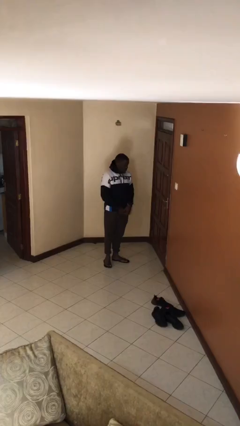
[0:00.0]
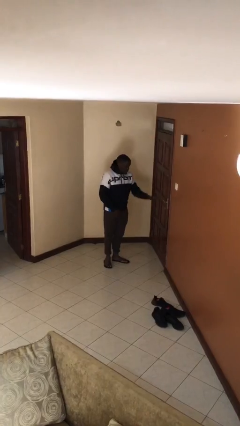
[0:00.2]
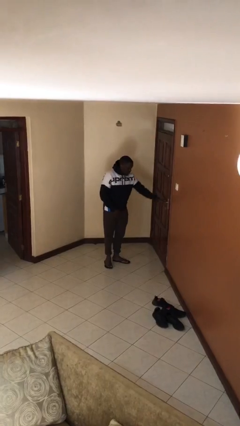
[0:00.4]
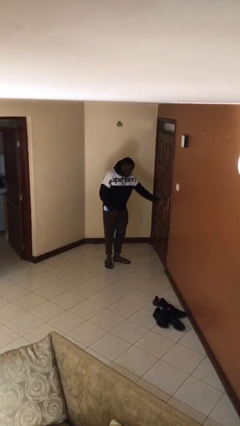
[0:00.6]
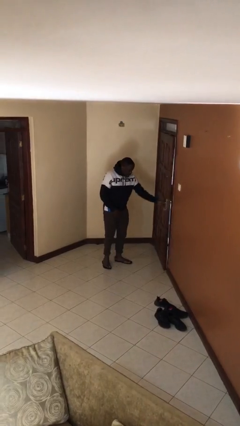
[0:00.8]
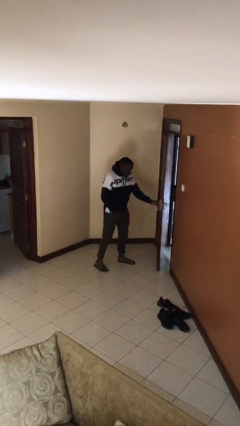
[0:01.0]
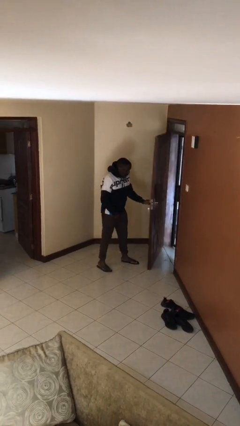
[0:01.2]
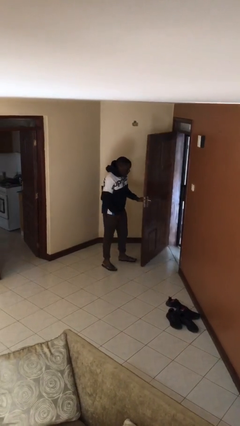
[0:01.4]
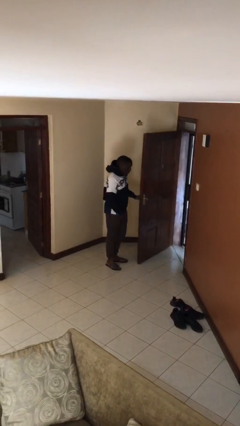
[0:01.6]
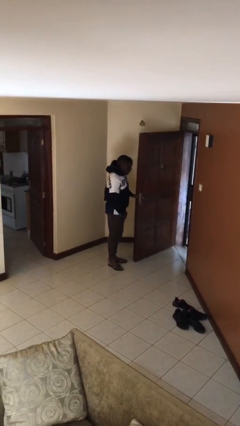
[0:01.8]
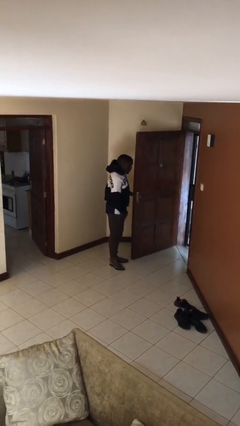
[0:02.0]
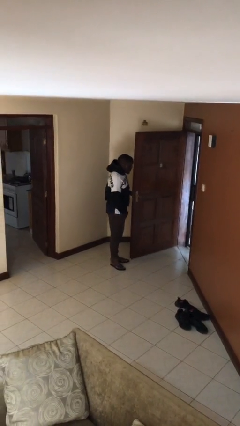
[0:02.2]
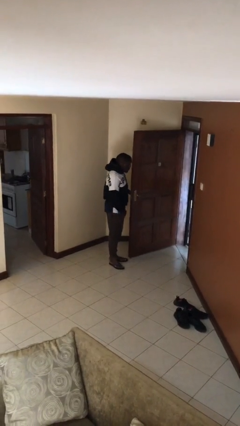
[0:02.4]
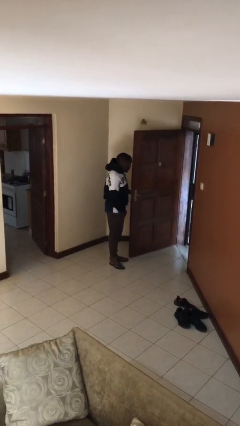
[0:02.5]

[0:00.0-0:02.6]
person opens facility door

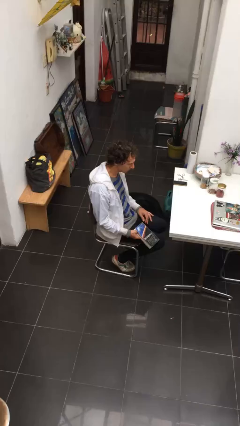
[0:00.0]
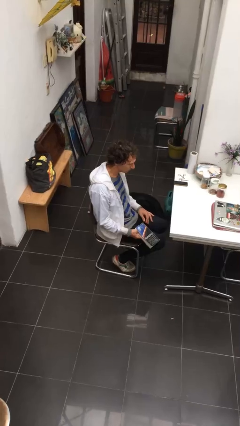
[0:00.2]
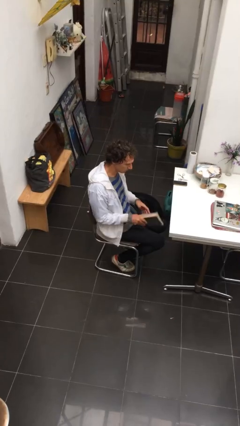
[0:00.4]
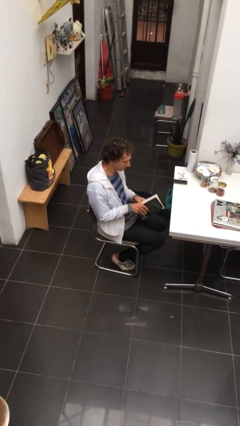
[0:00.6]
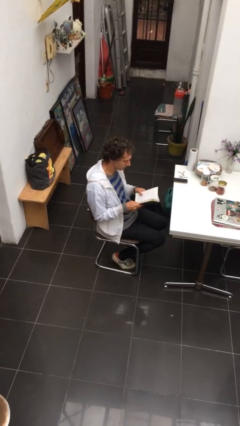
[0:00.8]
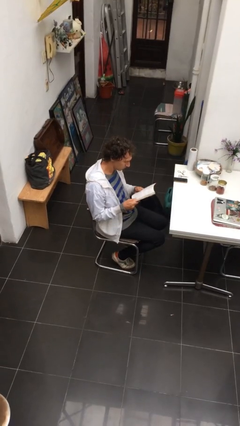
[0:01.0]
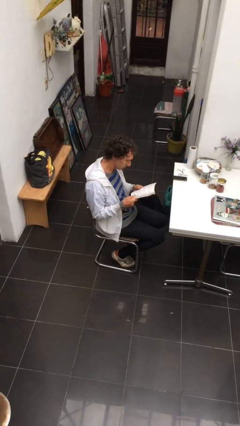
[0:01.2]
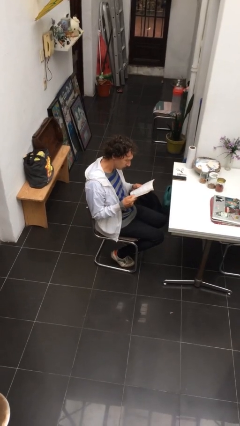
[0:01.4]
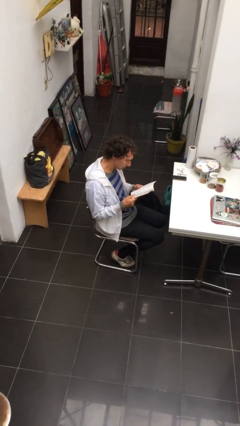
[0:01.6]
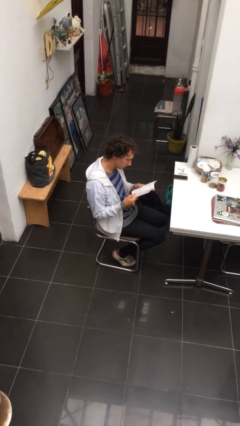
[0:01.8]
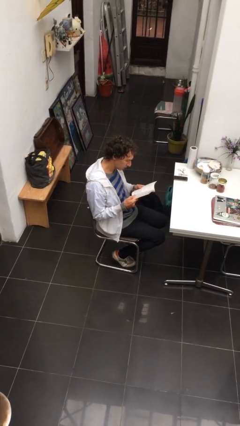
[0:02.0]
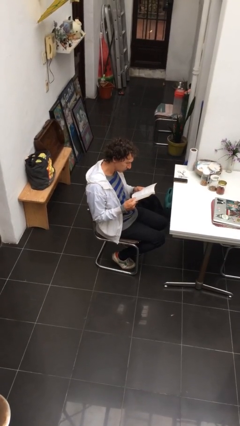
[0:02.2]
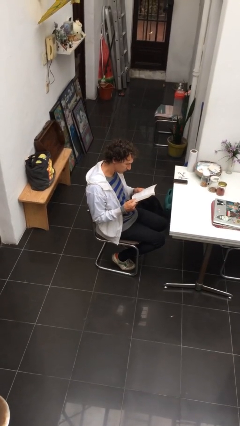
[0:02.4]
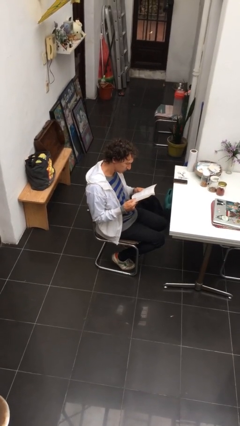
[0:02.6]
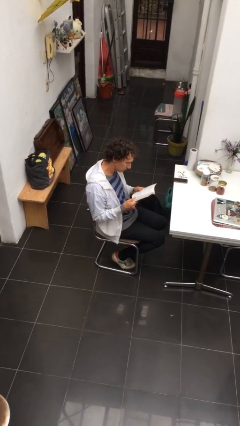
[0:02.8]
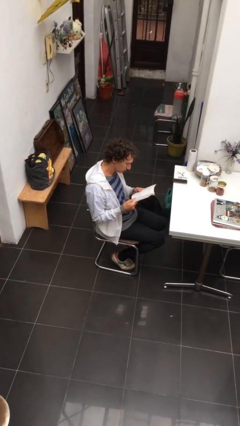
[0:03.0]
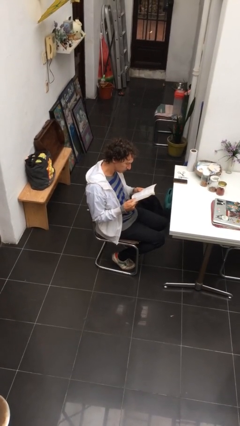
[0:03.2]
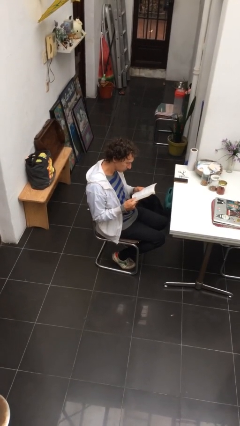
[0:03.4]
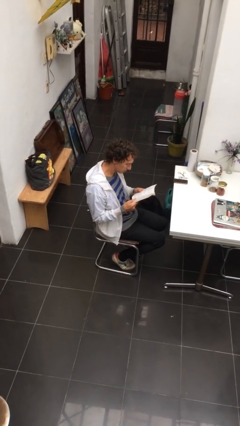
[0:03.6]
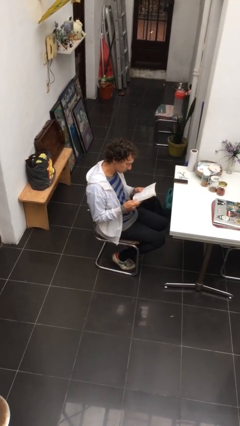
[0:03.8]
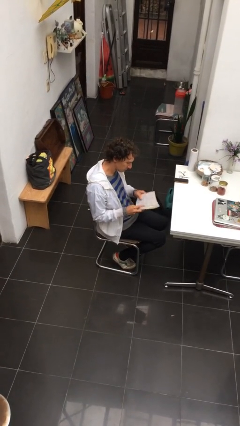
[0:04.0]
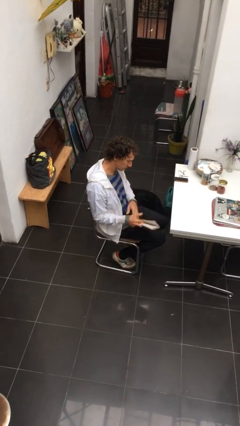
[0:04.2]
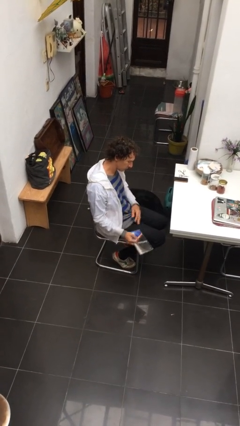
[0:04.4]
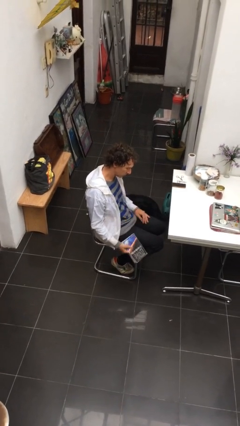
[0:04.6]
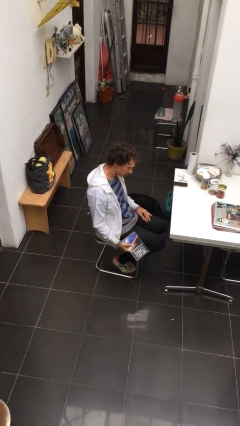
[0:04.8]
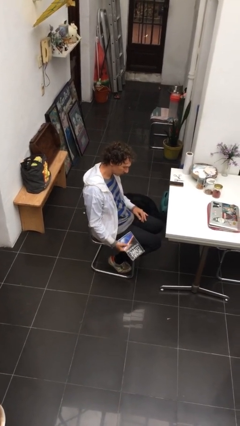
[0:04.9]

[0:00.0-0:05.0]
person reads document

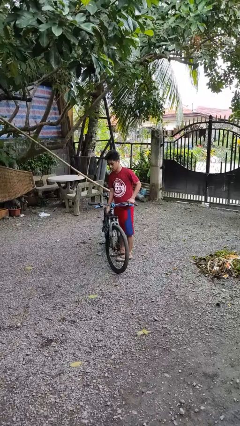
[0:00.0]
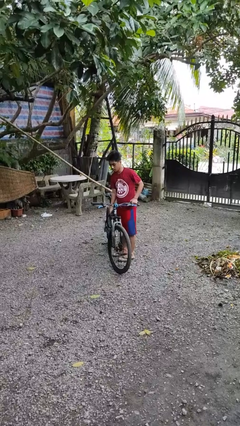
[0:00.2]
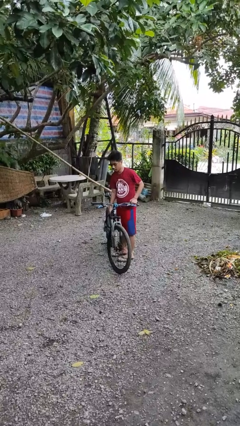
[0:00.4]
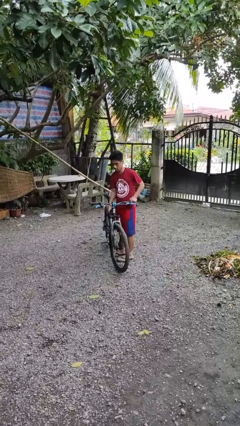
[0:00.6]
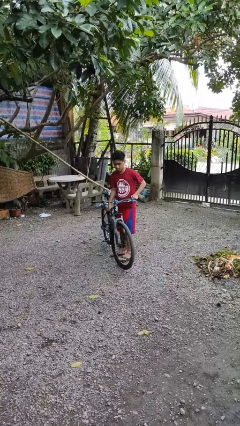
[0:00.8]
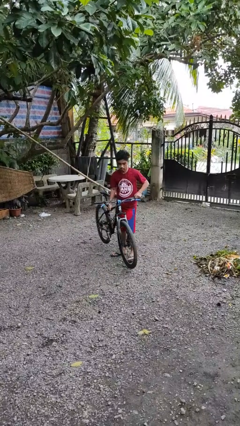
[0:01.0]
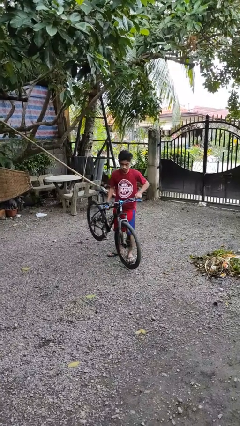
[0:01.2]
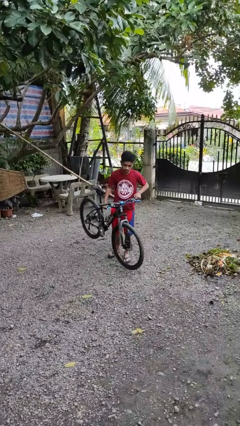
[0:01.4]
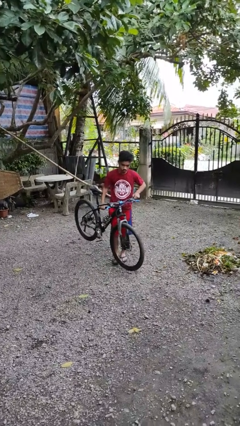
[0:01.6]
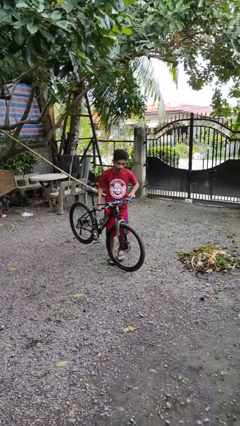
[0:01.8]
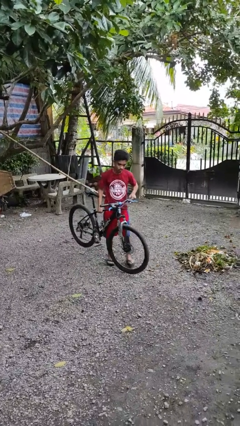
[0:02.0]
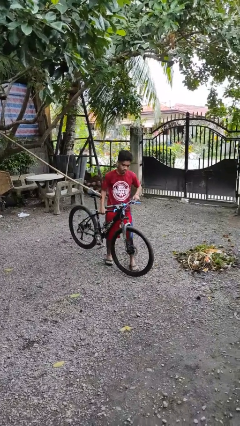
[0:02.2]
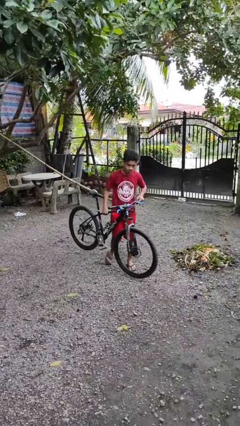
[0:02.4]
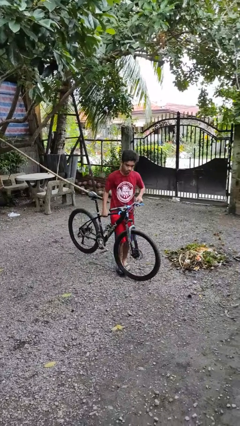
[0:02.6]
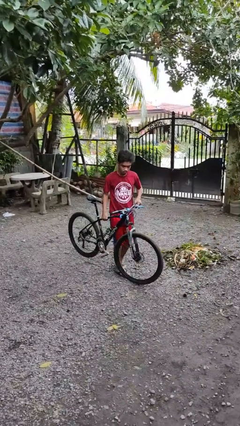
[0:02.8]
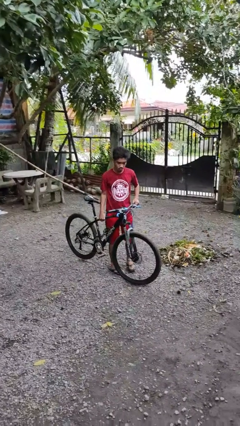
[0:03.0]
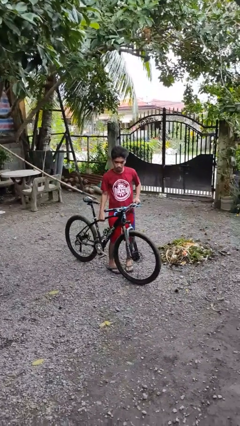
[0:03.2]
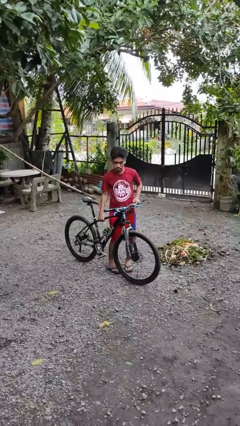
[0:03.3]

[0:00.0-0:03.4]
person carries bicycle

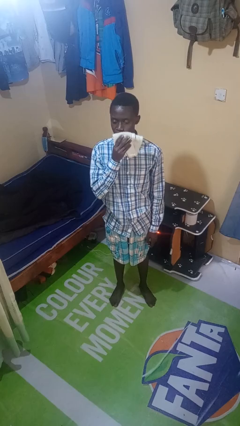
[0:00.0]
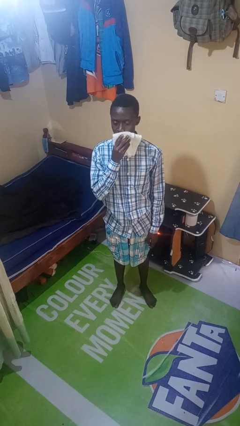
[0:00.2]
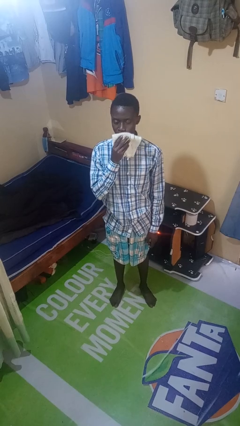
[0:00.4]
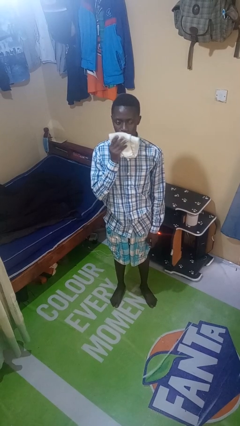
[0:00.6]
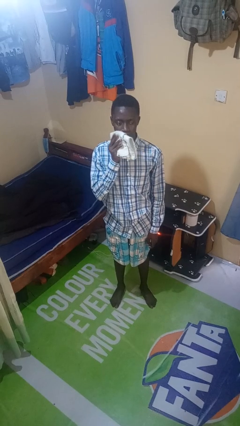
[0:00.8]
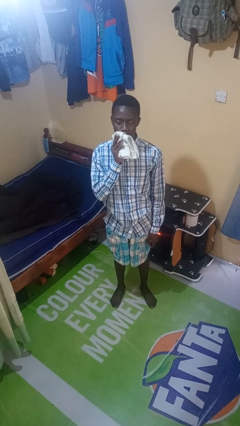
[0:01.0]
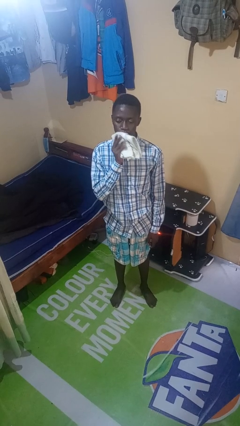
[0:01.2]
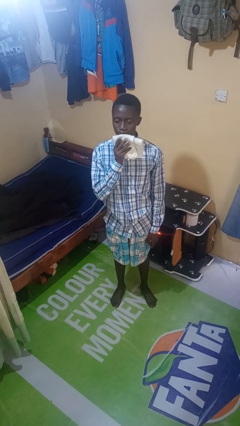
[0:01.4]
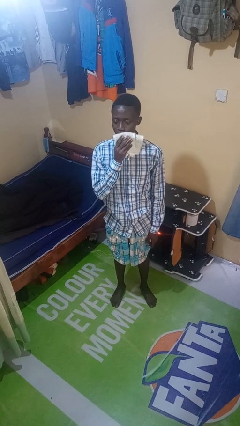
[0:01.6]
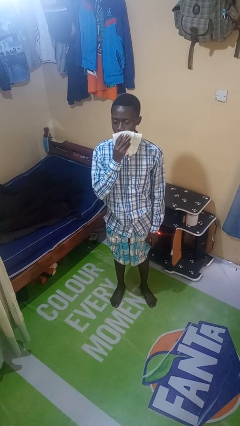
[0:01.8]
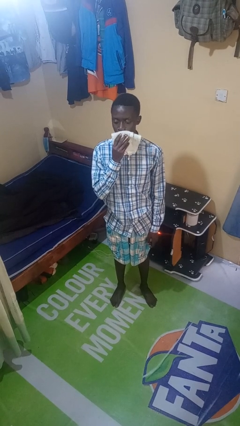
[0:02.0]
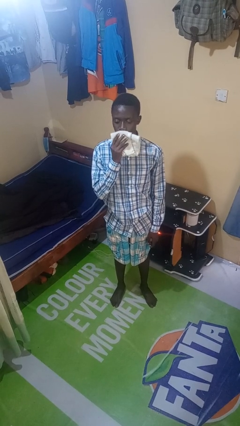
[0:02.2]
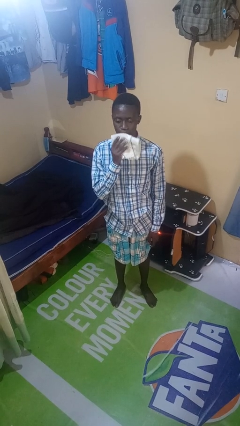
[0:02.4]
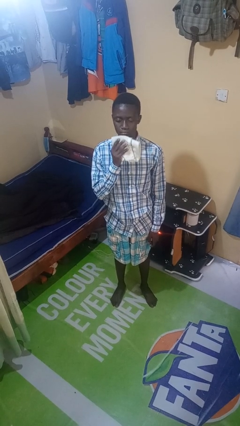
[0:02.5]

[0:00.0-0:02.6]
person wipes mouth with napkin

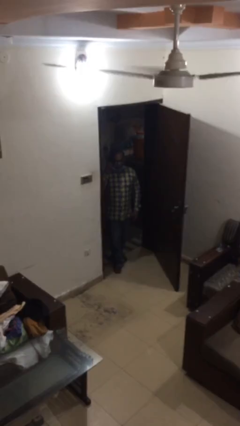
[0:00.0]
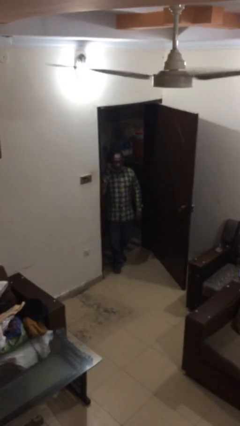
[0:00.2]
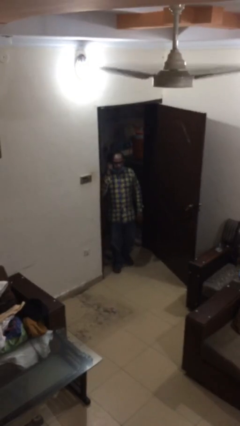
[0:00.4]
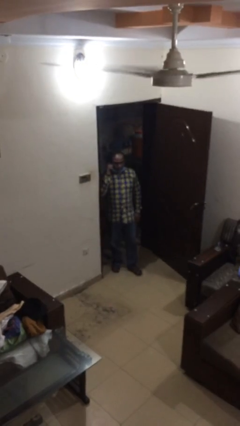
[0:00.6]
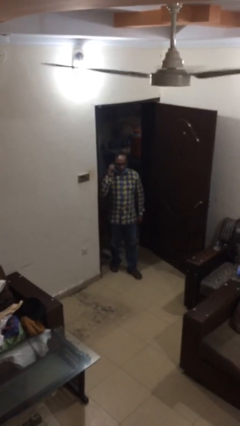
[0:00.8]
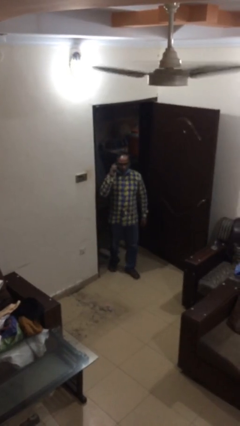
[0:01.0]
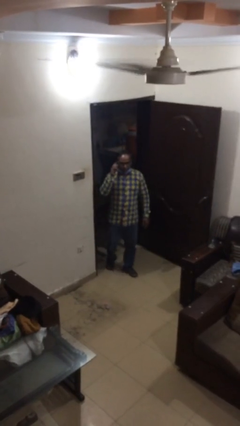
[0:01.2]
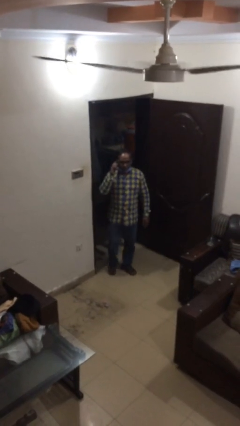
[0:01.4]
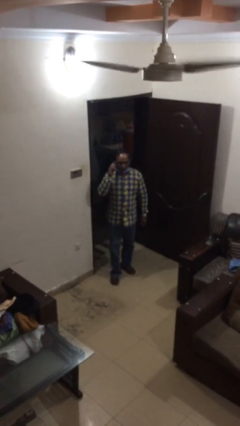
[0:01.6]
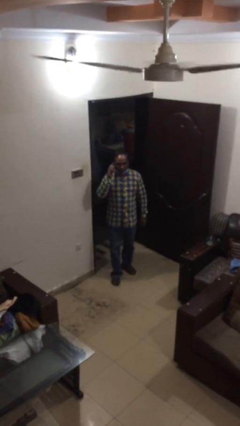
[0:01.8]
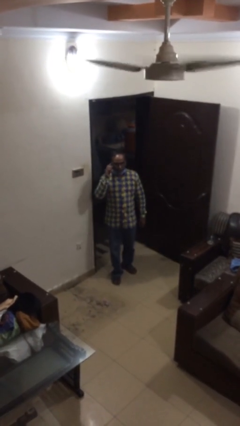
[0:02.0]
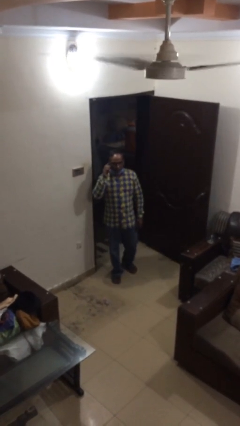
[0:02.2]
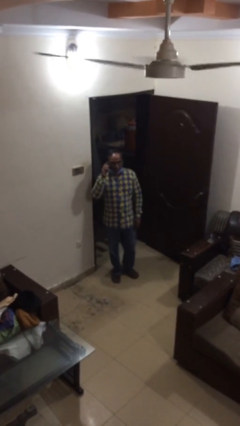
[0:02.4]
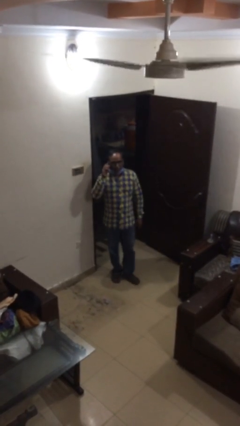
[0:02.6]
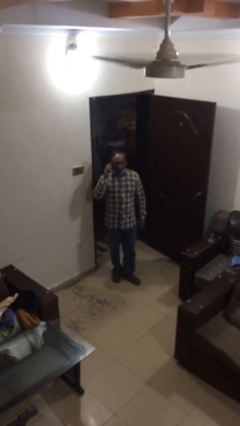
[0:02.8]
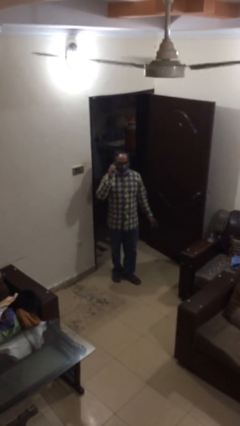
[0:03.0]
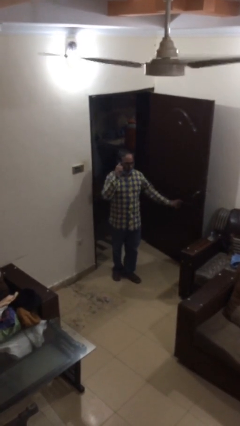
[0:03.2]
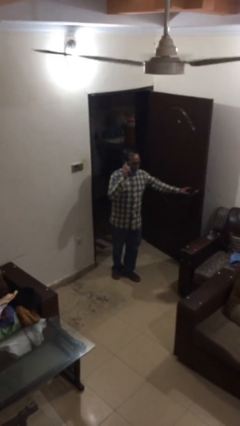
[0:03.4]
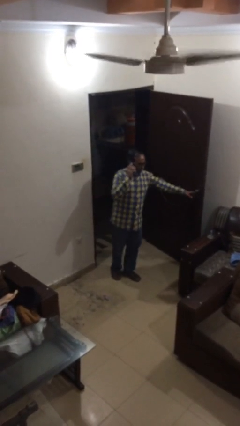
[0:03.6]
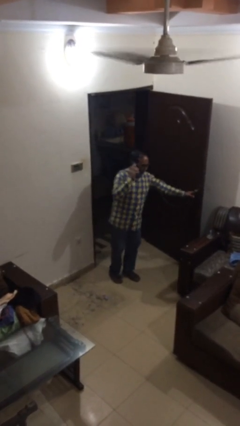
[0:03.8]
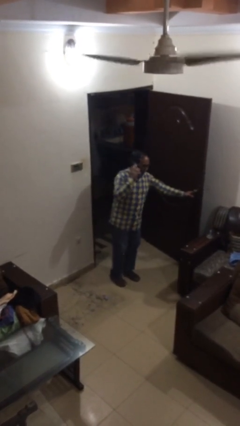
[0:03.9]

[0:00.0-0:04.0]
person enters scene through structure
